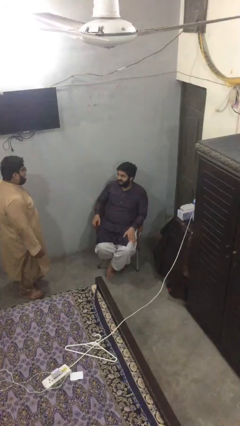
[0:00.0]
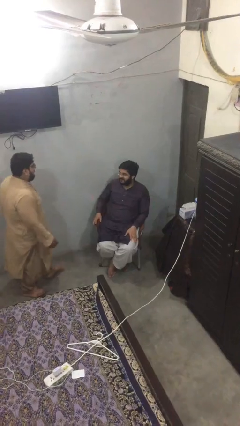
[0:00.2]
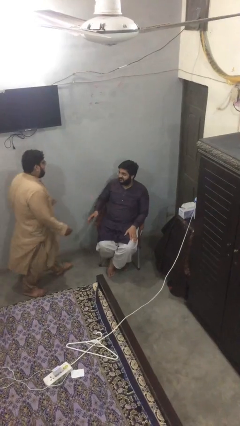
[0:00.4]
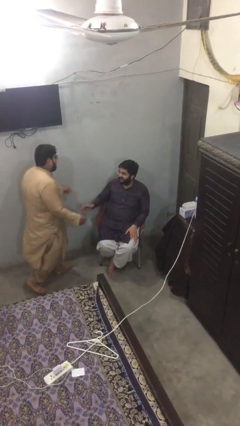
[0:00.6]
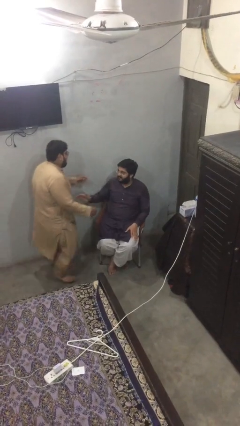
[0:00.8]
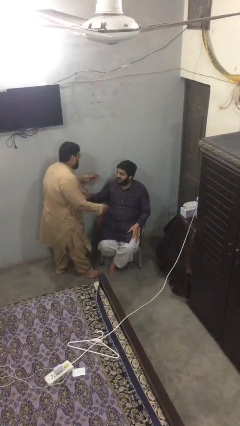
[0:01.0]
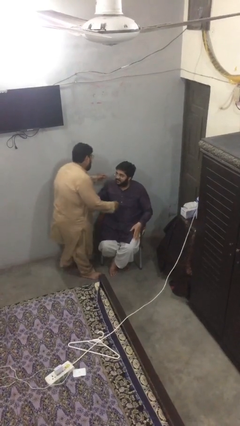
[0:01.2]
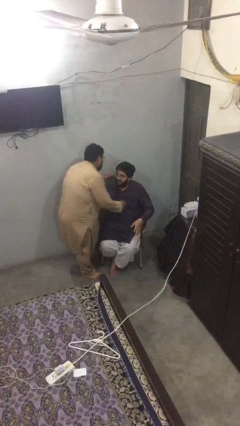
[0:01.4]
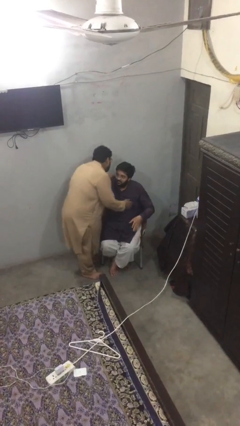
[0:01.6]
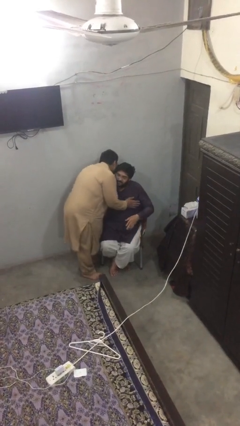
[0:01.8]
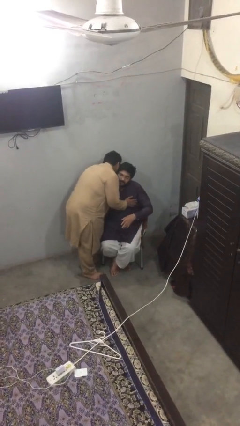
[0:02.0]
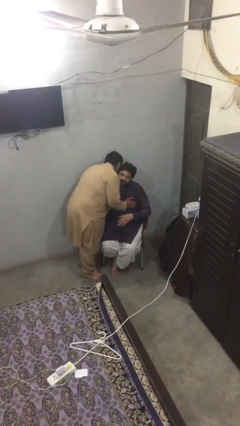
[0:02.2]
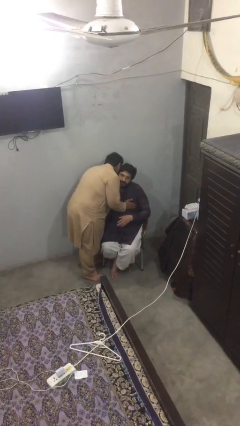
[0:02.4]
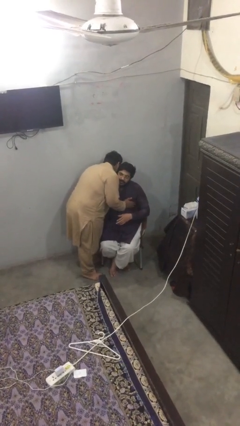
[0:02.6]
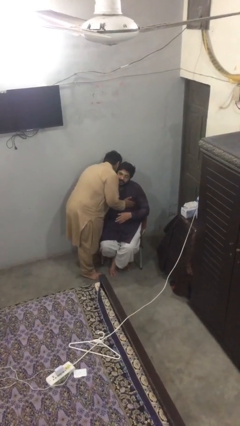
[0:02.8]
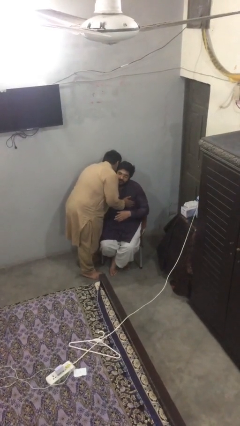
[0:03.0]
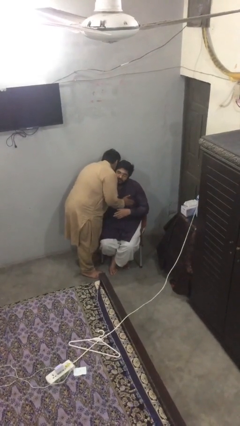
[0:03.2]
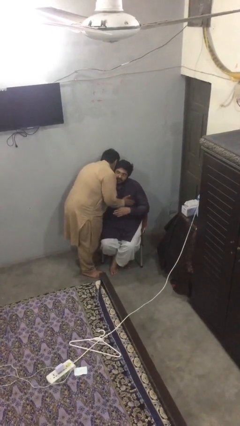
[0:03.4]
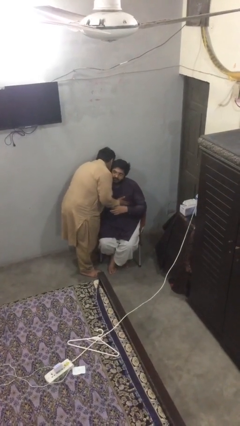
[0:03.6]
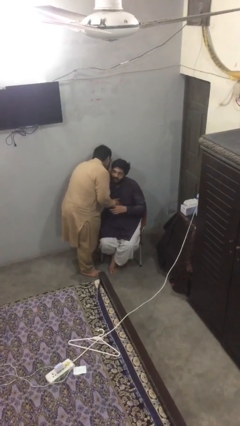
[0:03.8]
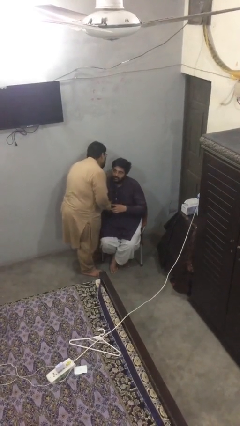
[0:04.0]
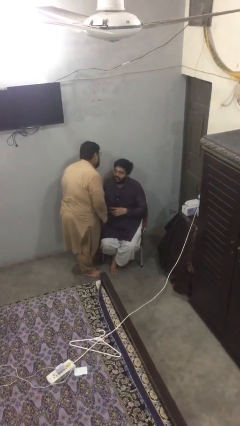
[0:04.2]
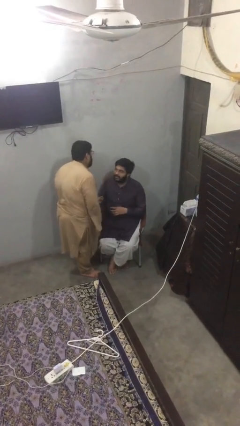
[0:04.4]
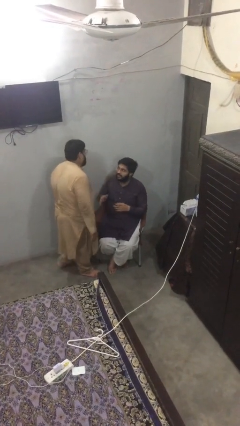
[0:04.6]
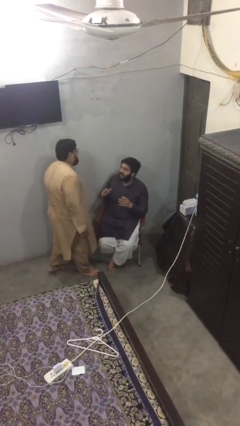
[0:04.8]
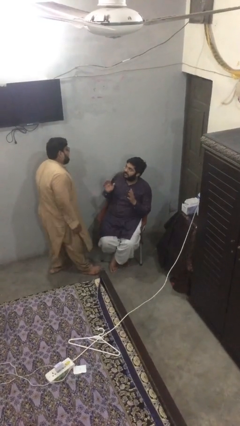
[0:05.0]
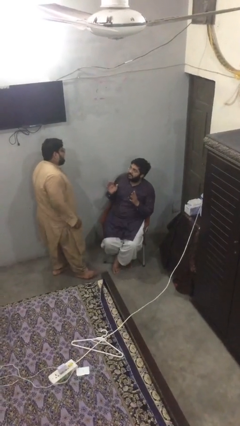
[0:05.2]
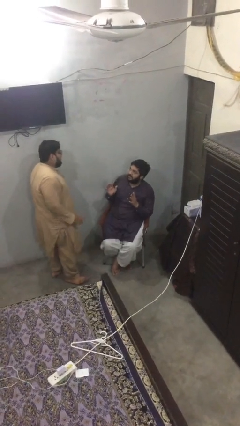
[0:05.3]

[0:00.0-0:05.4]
person embraces person

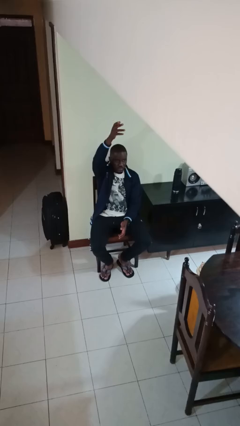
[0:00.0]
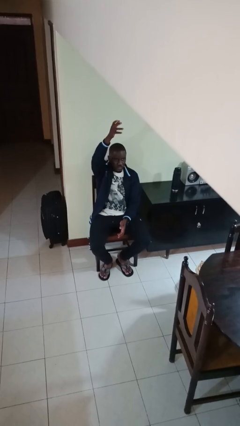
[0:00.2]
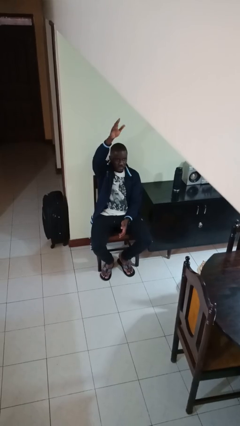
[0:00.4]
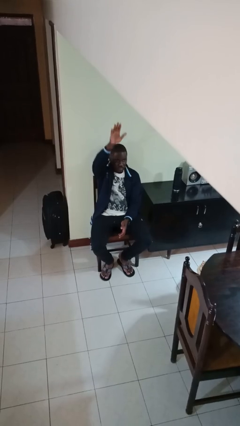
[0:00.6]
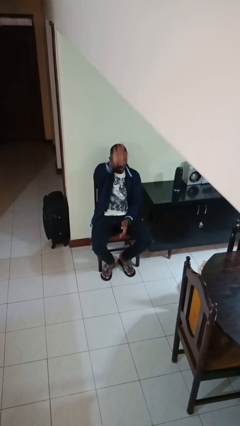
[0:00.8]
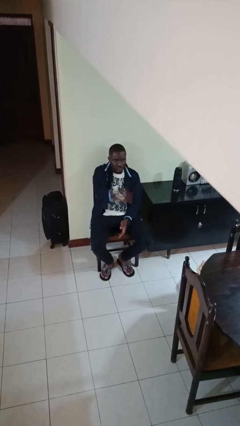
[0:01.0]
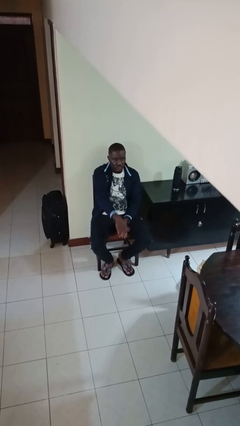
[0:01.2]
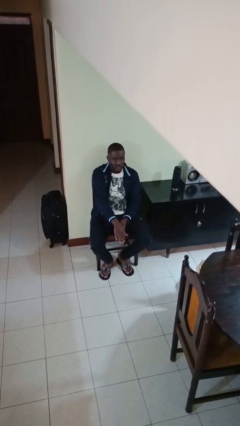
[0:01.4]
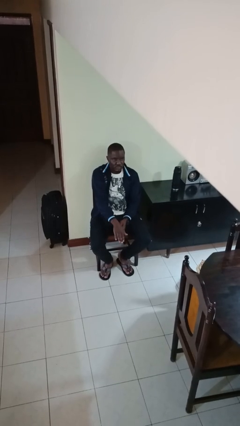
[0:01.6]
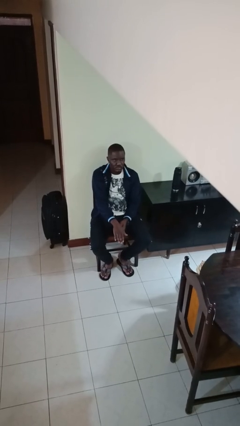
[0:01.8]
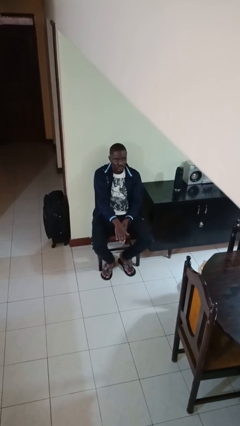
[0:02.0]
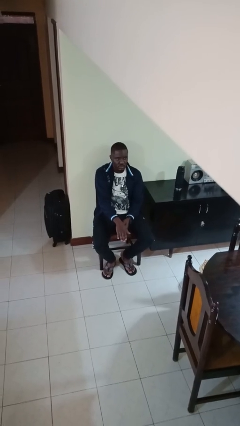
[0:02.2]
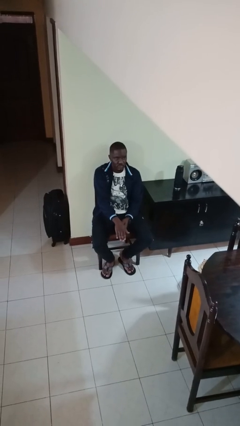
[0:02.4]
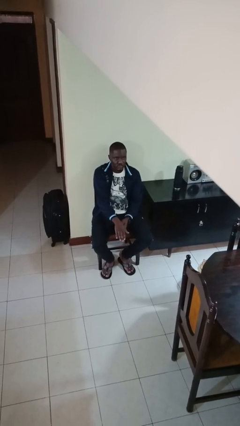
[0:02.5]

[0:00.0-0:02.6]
person gestures swipe down

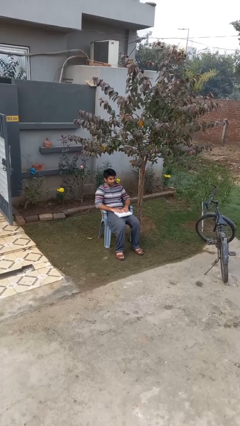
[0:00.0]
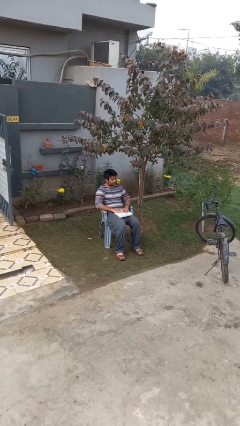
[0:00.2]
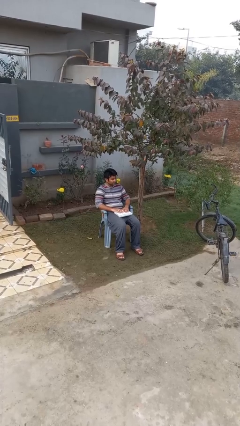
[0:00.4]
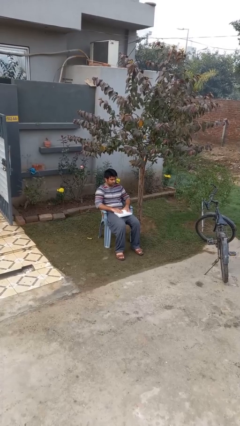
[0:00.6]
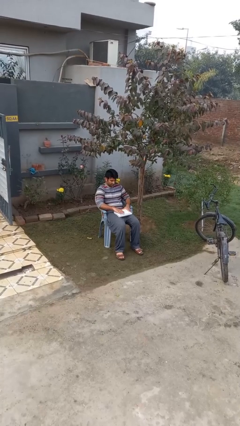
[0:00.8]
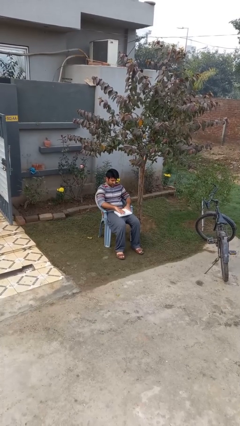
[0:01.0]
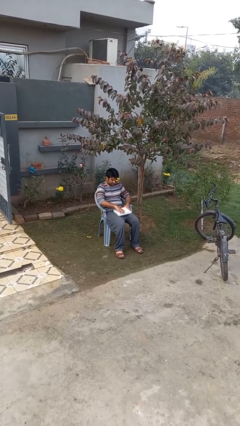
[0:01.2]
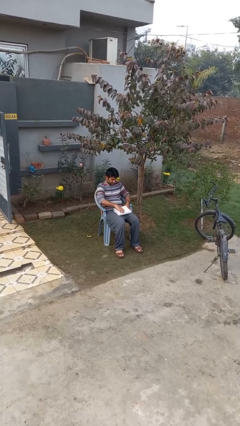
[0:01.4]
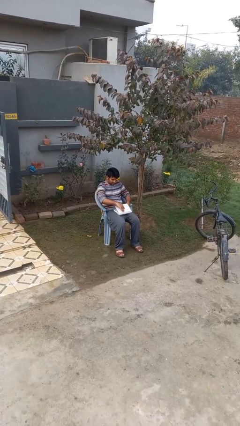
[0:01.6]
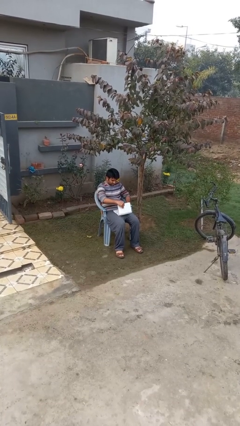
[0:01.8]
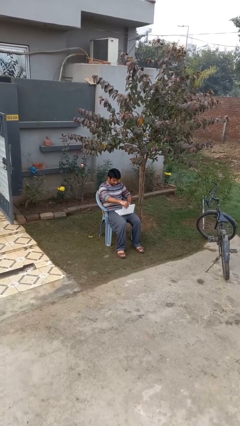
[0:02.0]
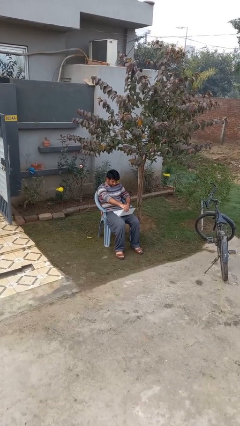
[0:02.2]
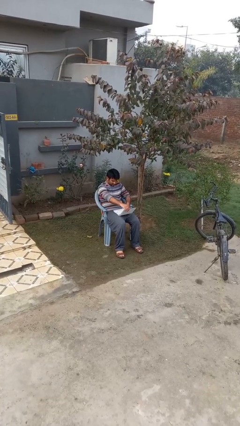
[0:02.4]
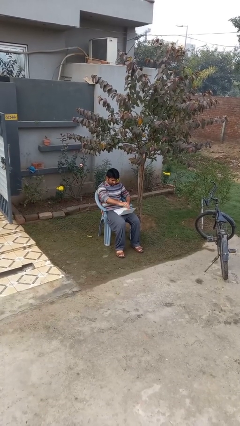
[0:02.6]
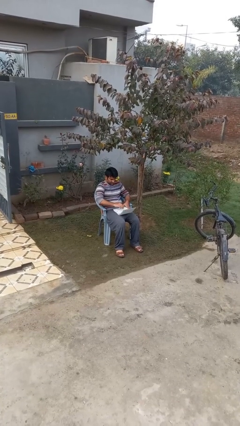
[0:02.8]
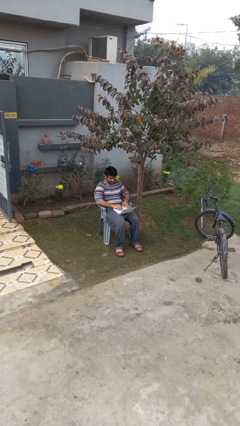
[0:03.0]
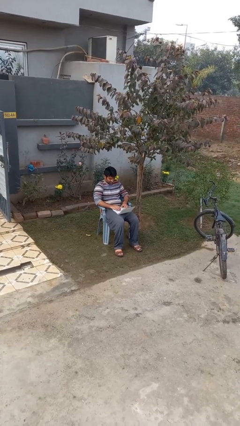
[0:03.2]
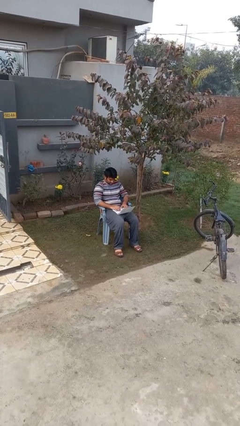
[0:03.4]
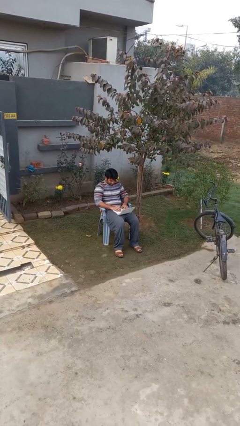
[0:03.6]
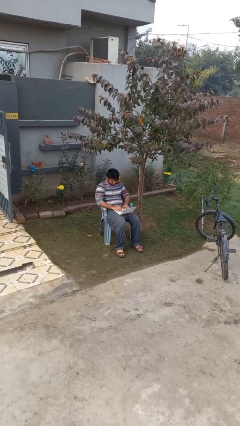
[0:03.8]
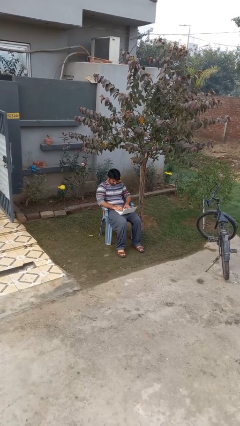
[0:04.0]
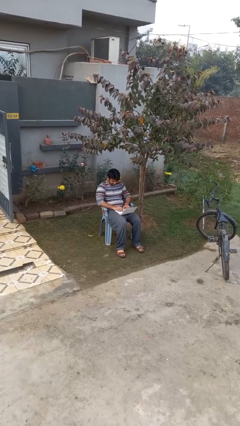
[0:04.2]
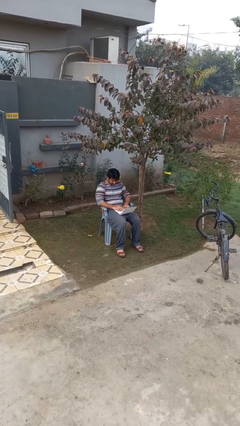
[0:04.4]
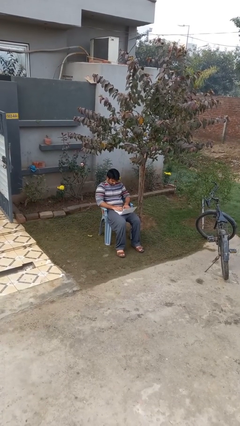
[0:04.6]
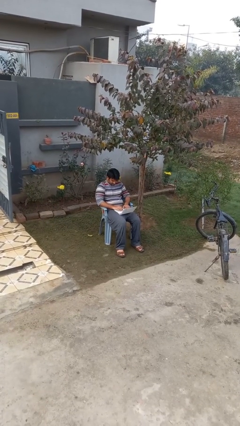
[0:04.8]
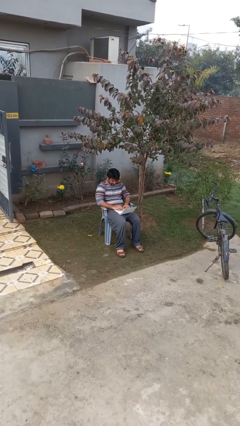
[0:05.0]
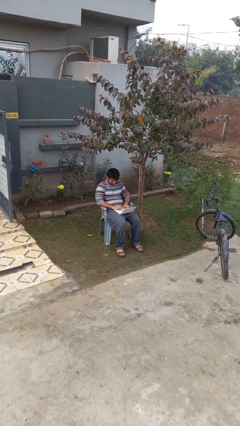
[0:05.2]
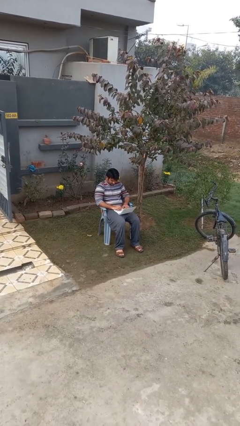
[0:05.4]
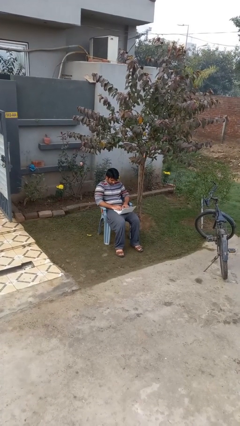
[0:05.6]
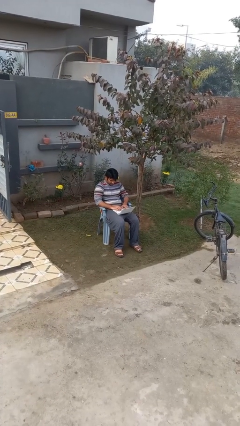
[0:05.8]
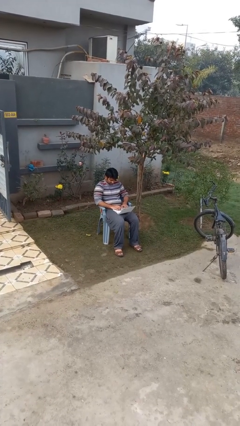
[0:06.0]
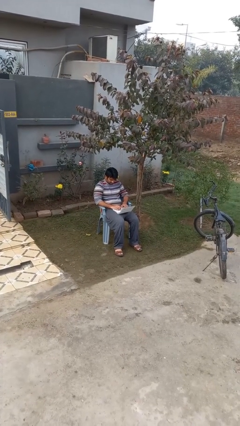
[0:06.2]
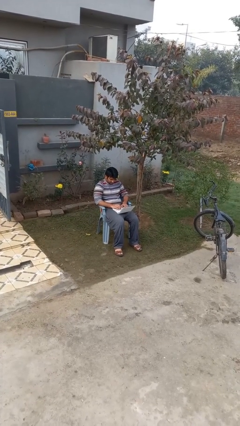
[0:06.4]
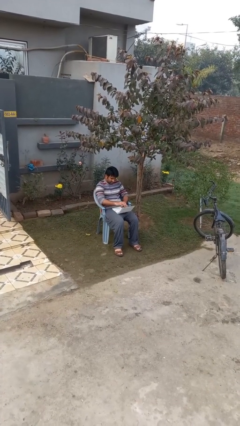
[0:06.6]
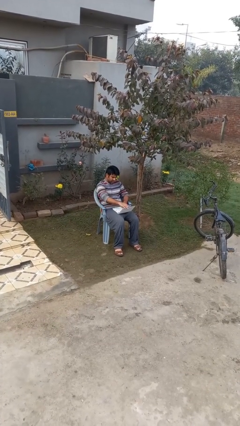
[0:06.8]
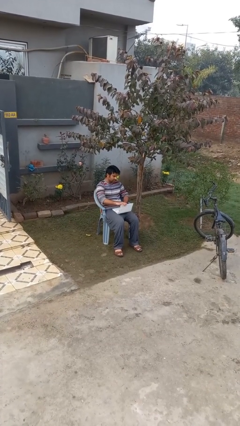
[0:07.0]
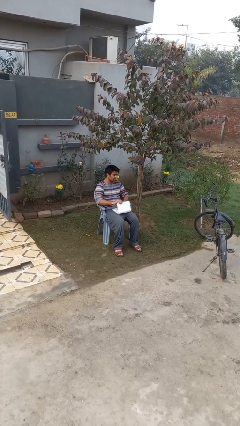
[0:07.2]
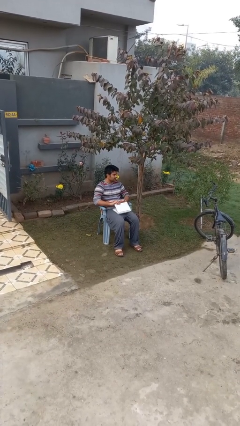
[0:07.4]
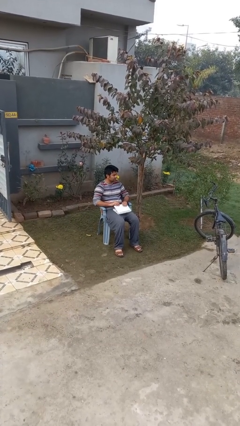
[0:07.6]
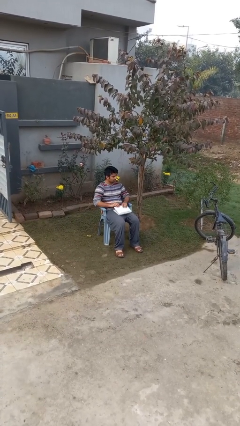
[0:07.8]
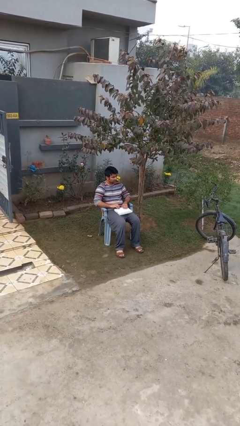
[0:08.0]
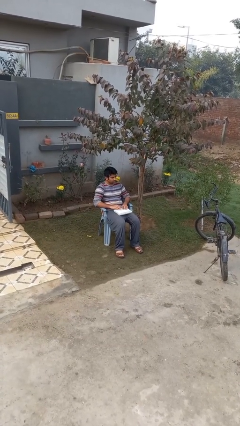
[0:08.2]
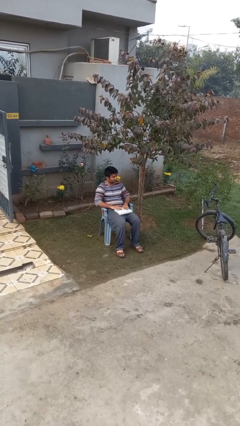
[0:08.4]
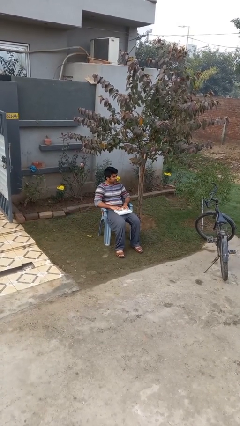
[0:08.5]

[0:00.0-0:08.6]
person interacts with laptop

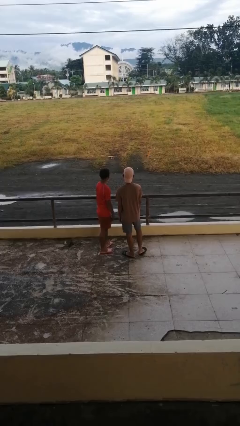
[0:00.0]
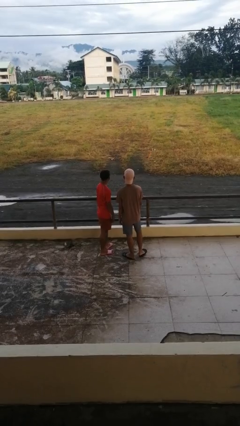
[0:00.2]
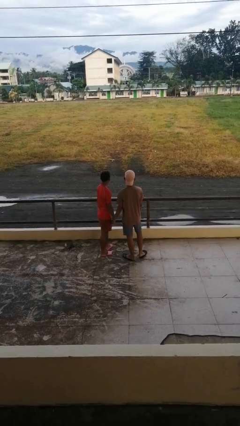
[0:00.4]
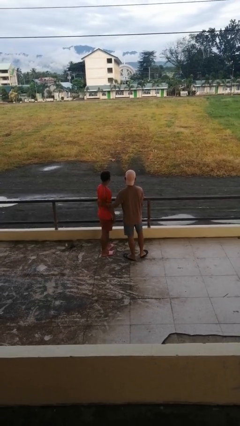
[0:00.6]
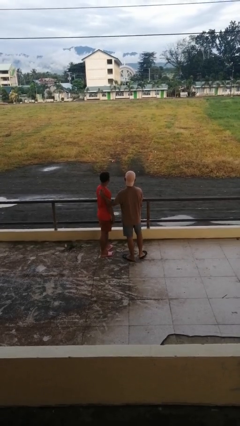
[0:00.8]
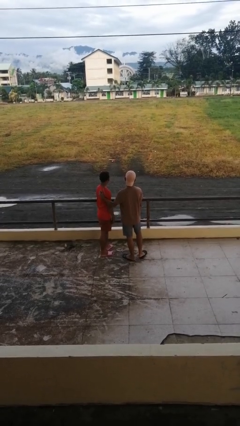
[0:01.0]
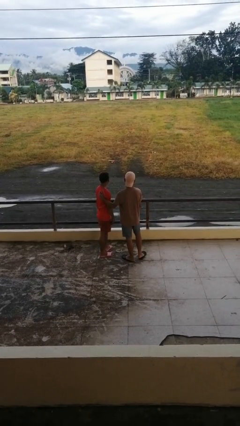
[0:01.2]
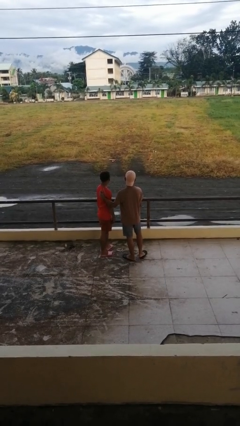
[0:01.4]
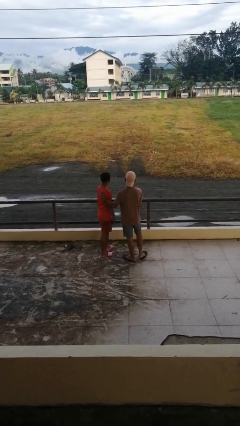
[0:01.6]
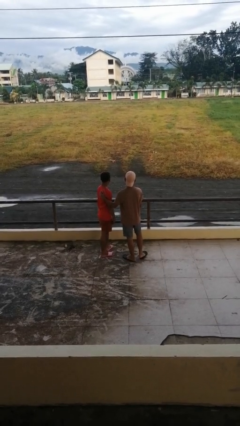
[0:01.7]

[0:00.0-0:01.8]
person touches back of person
